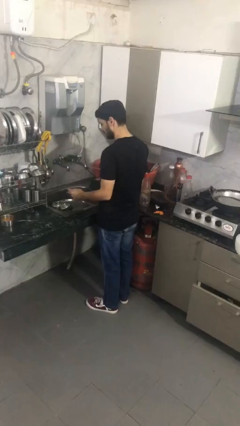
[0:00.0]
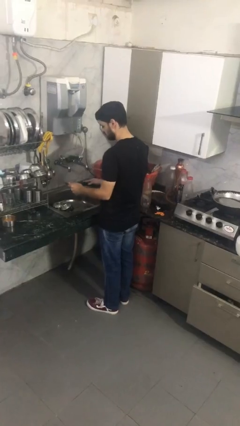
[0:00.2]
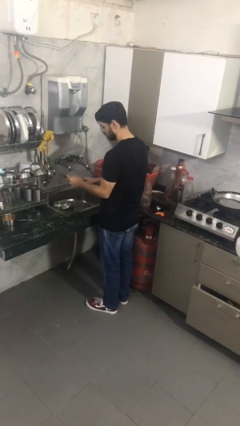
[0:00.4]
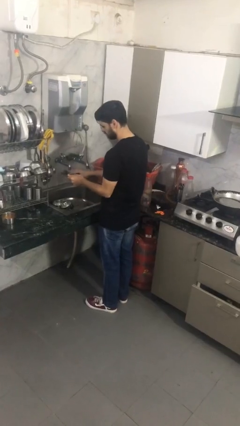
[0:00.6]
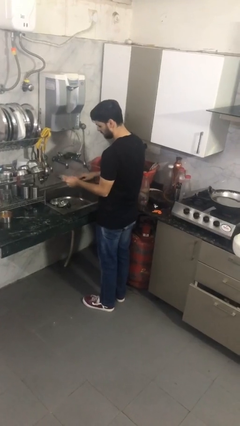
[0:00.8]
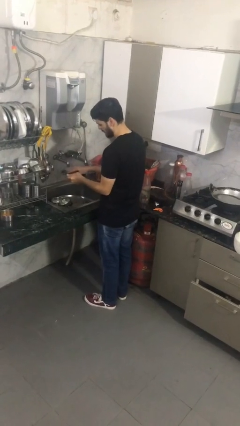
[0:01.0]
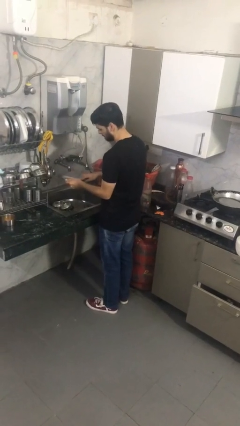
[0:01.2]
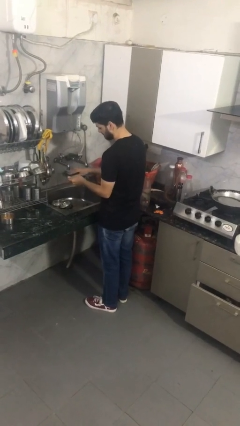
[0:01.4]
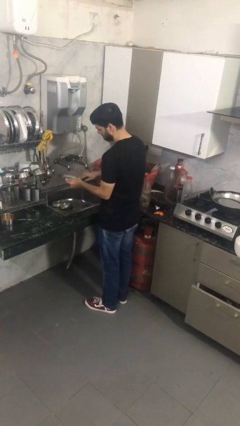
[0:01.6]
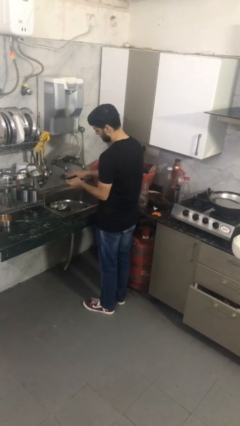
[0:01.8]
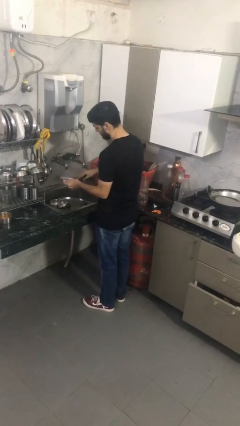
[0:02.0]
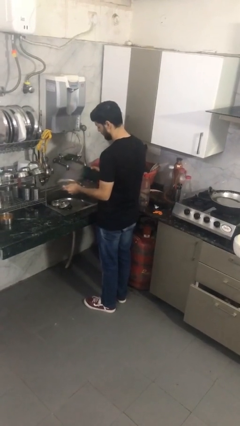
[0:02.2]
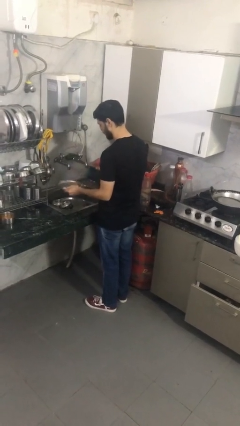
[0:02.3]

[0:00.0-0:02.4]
person washes dish

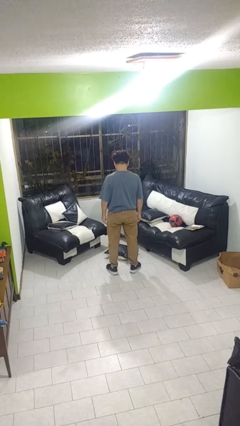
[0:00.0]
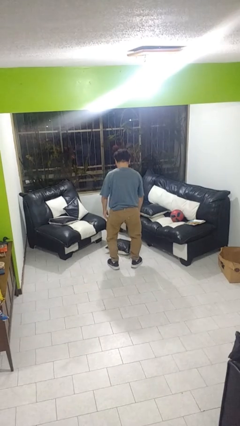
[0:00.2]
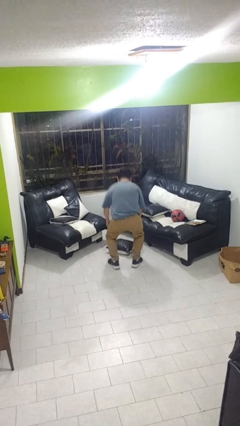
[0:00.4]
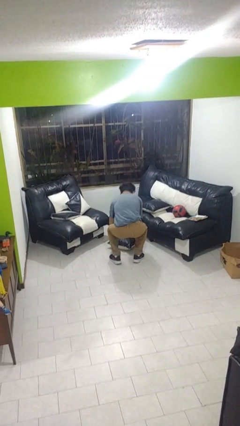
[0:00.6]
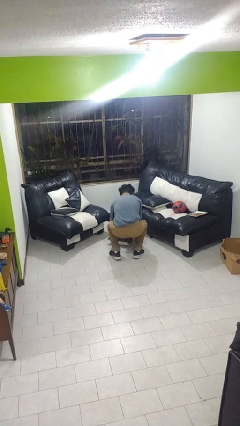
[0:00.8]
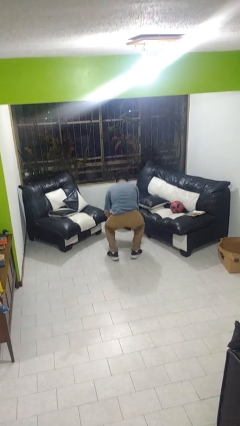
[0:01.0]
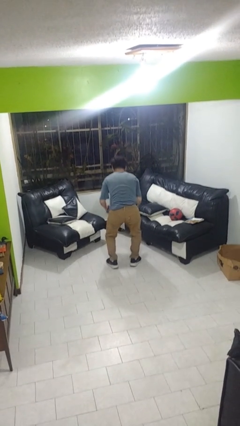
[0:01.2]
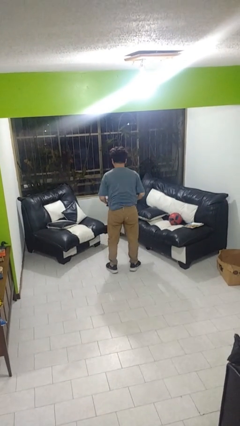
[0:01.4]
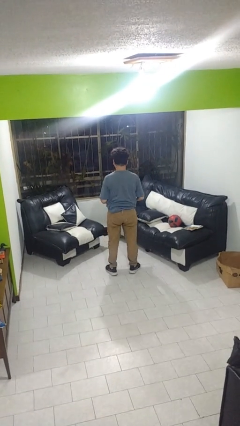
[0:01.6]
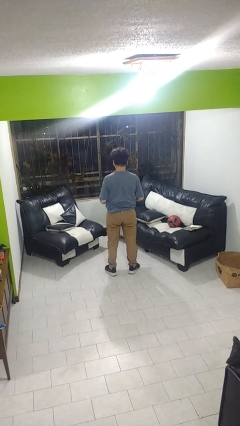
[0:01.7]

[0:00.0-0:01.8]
person picks up object from floor

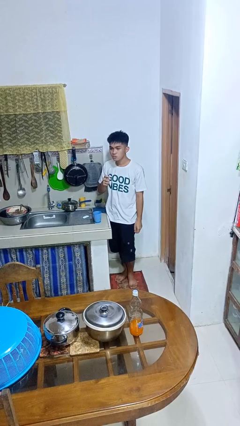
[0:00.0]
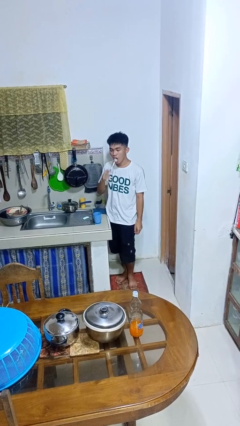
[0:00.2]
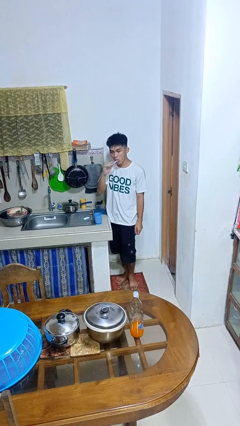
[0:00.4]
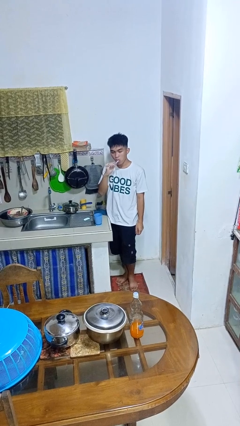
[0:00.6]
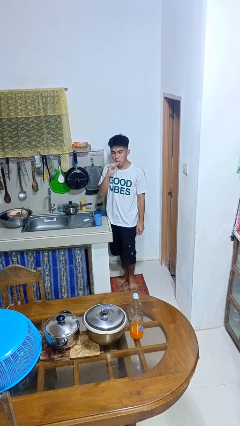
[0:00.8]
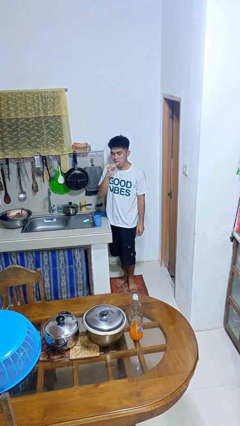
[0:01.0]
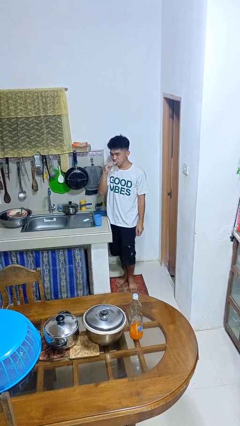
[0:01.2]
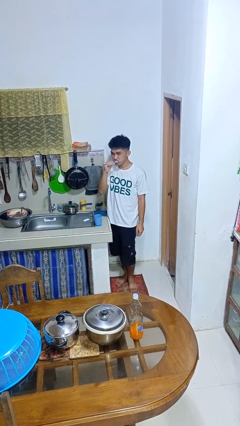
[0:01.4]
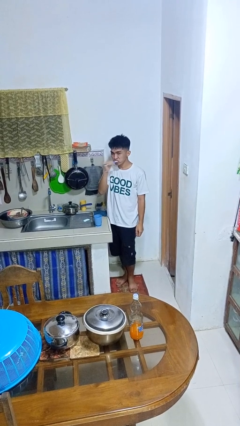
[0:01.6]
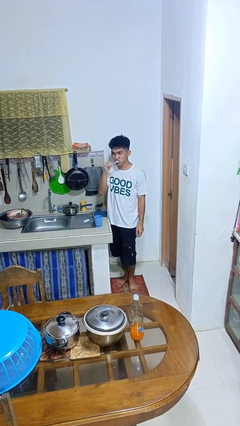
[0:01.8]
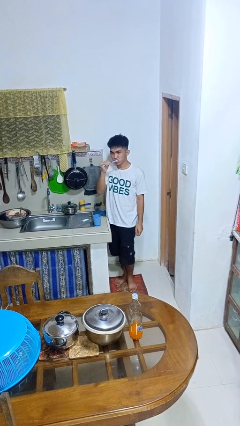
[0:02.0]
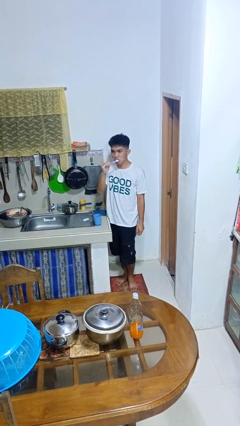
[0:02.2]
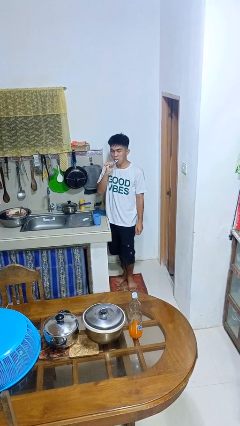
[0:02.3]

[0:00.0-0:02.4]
person brushes teeth

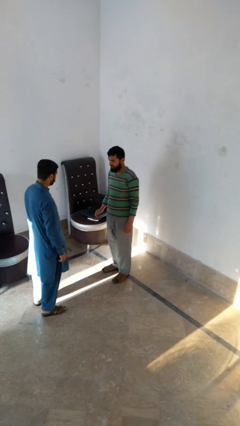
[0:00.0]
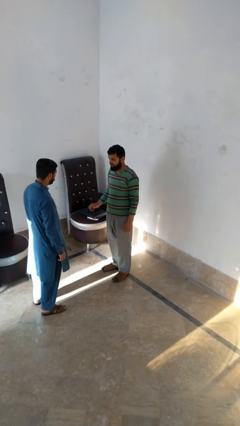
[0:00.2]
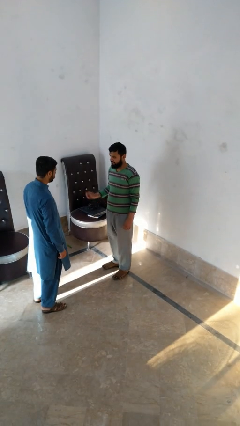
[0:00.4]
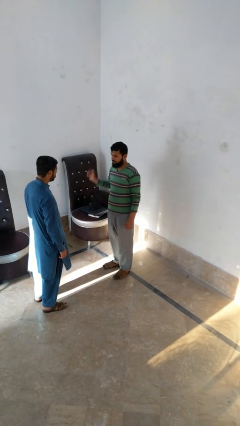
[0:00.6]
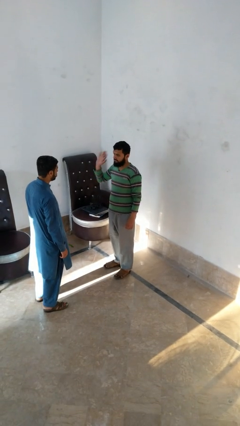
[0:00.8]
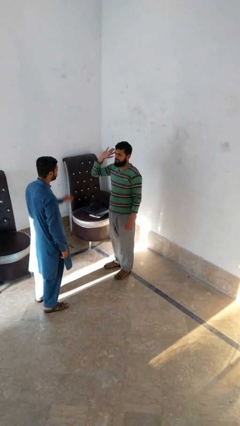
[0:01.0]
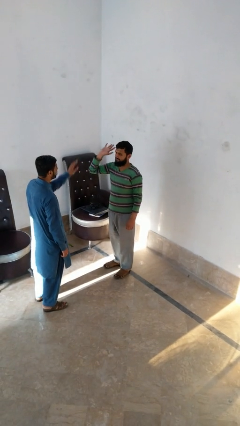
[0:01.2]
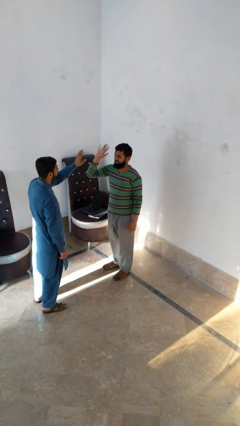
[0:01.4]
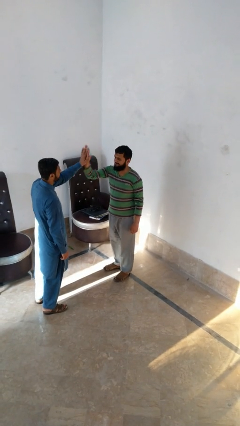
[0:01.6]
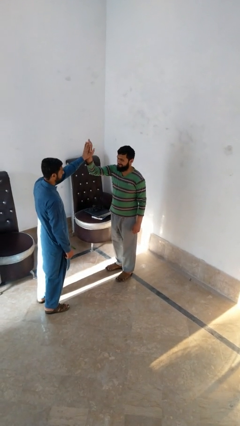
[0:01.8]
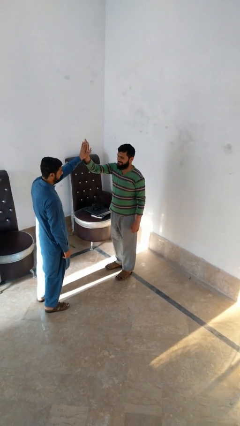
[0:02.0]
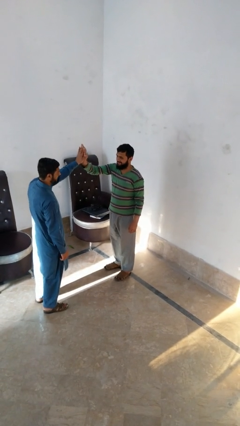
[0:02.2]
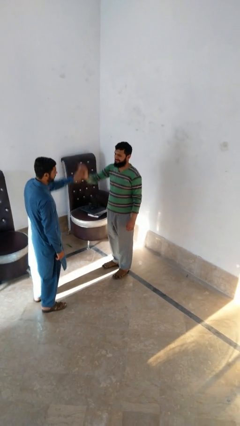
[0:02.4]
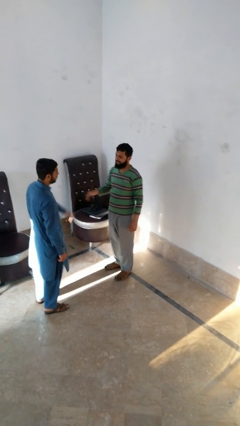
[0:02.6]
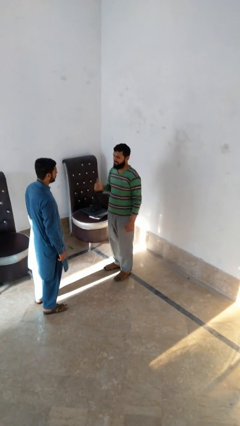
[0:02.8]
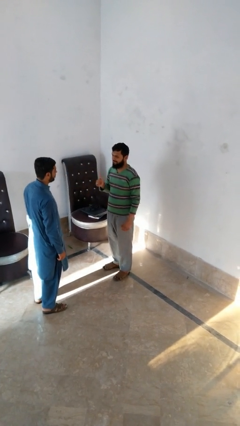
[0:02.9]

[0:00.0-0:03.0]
person highfives hand

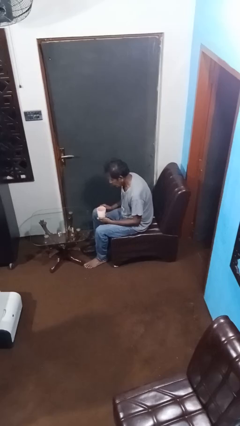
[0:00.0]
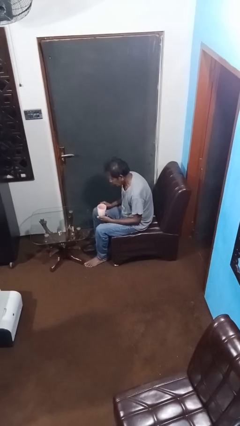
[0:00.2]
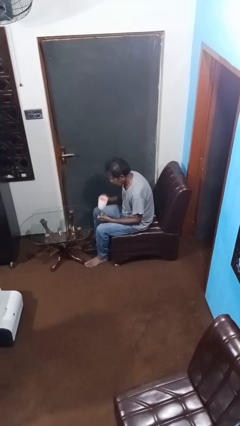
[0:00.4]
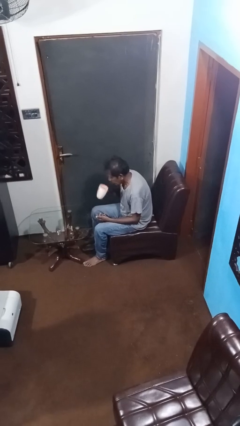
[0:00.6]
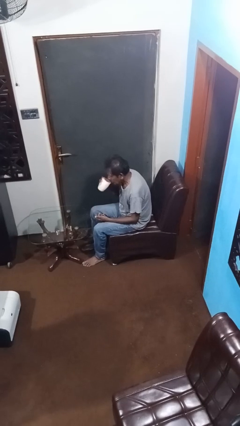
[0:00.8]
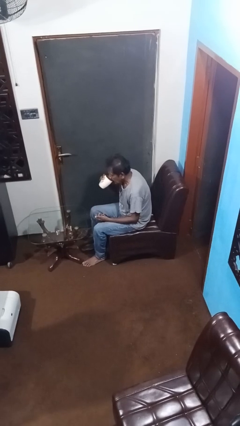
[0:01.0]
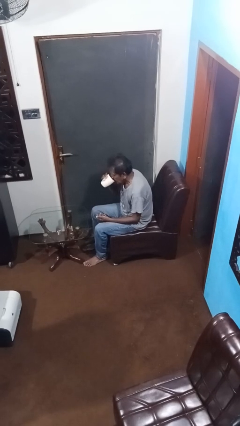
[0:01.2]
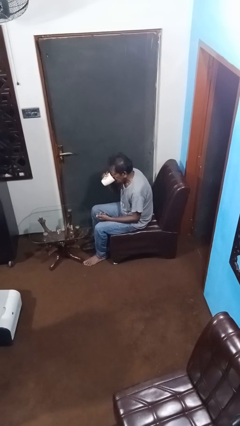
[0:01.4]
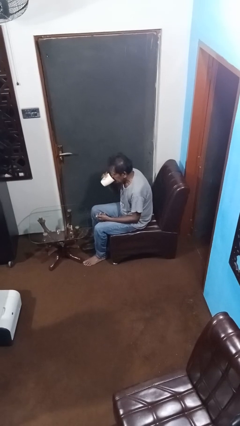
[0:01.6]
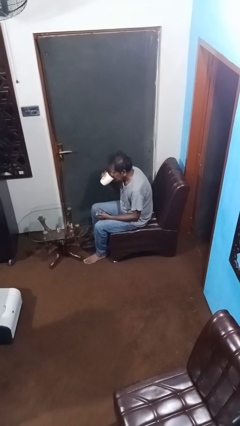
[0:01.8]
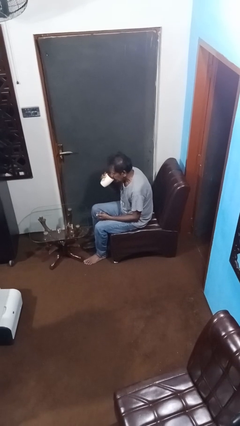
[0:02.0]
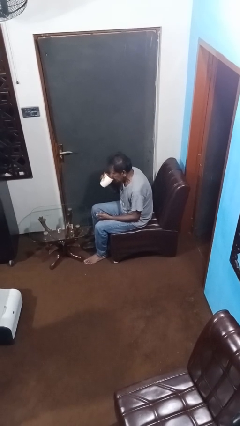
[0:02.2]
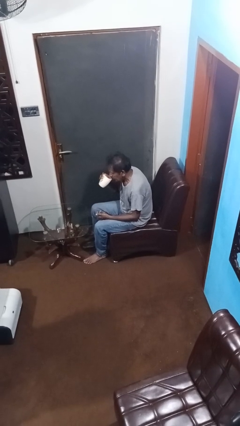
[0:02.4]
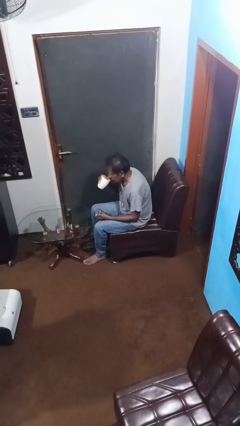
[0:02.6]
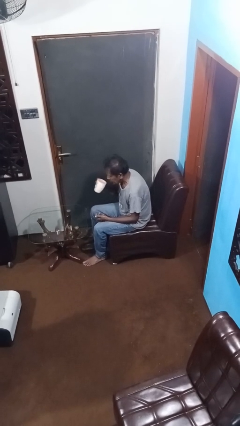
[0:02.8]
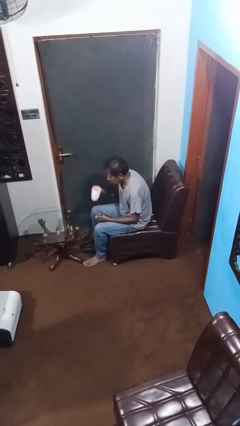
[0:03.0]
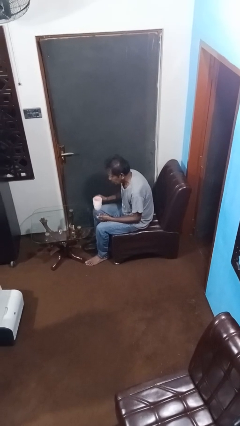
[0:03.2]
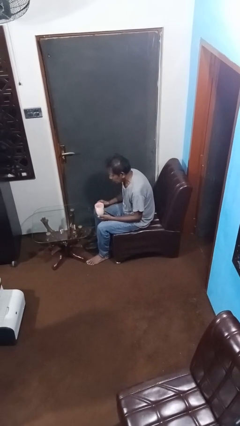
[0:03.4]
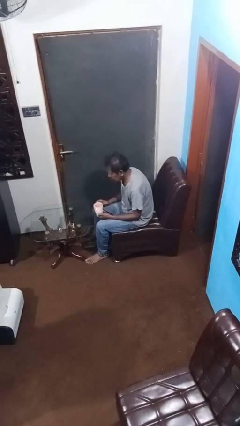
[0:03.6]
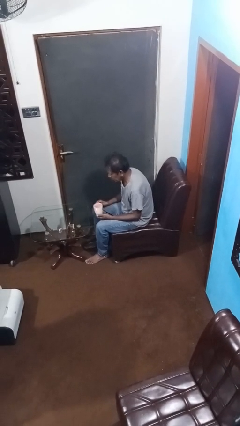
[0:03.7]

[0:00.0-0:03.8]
person drinks from mug

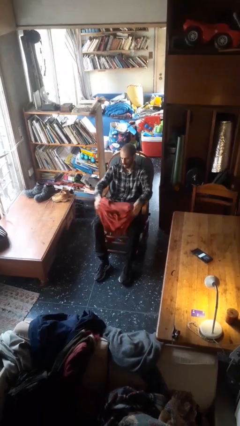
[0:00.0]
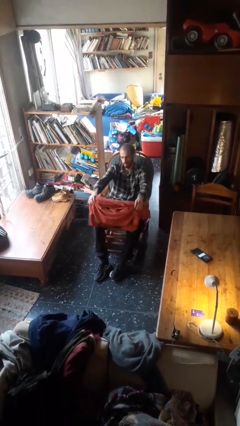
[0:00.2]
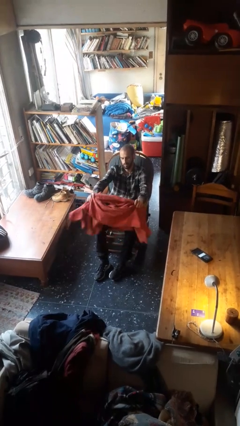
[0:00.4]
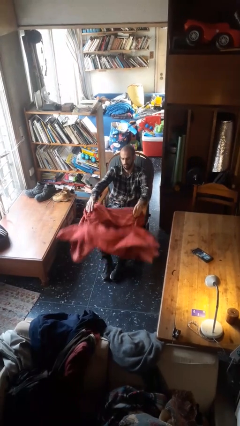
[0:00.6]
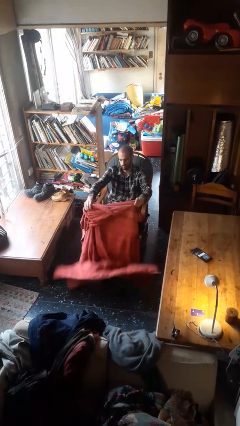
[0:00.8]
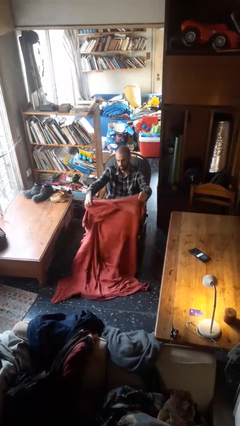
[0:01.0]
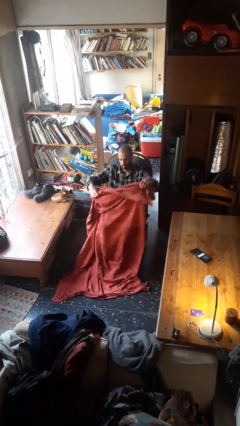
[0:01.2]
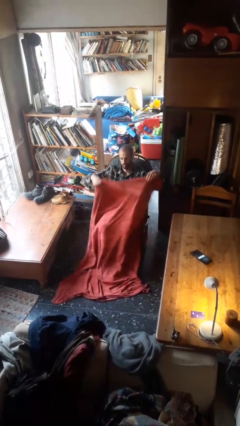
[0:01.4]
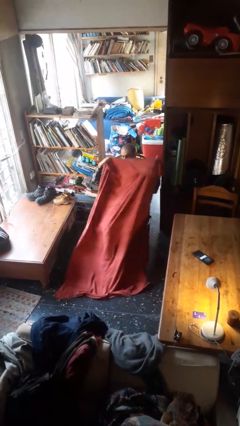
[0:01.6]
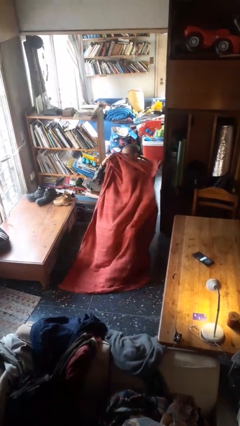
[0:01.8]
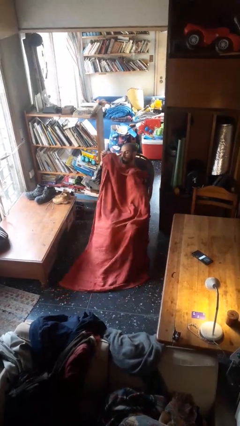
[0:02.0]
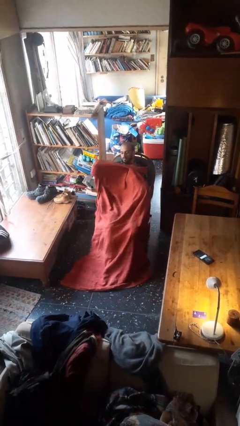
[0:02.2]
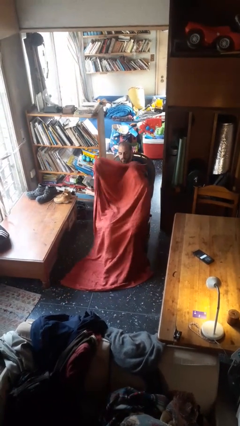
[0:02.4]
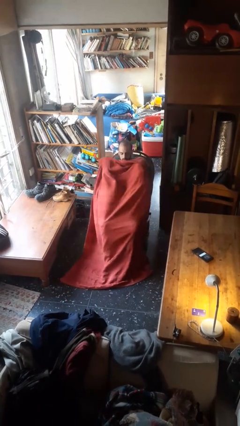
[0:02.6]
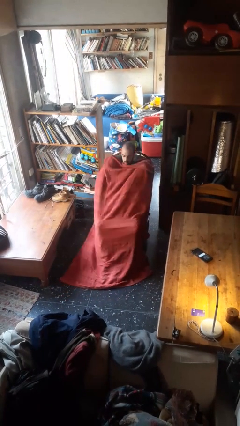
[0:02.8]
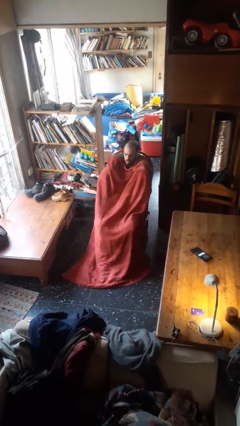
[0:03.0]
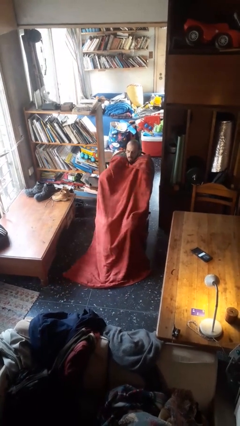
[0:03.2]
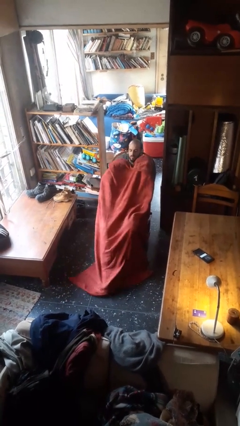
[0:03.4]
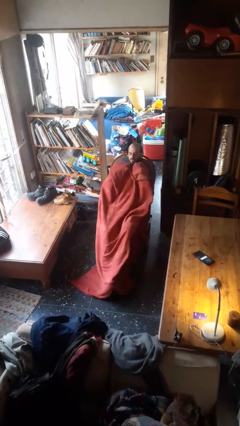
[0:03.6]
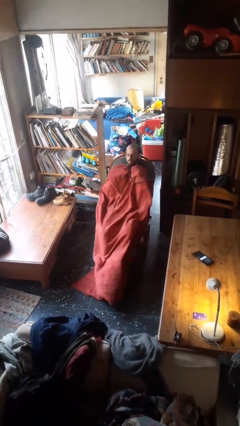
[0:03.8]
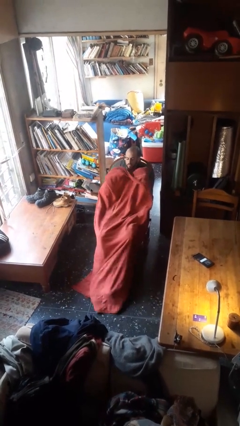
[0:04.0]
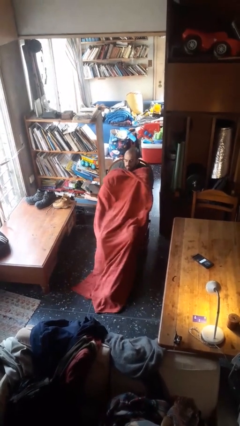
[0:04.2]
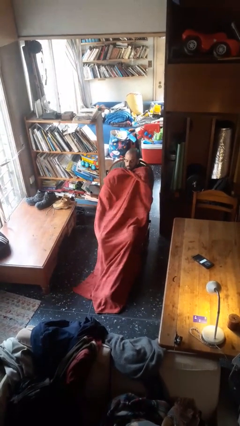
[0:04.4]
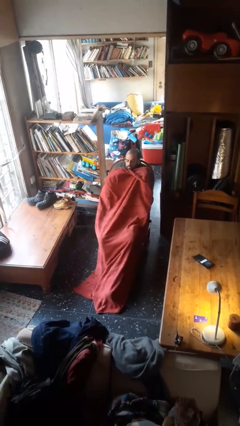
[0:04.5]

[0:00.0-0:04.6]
person covers with blanket
